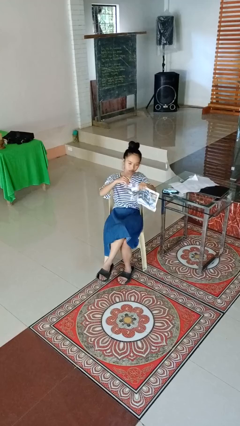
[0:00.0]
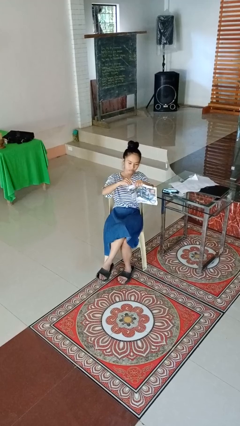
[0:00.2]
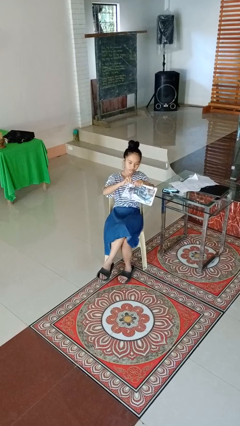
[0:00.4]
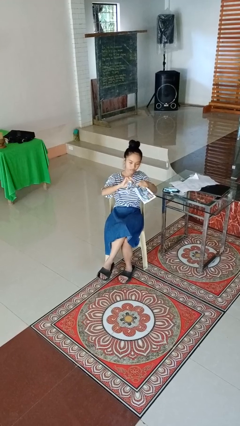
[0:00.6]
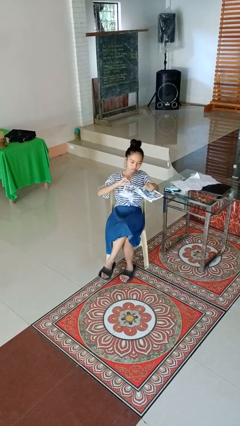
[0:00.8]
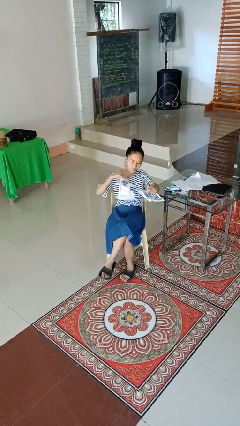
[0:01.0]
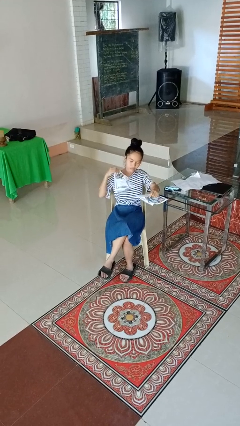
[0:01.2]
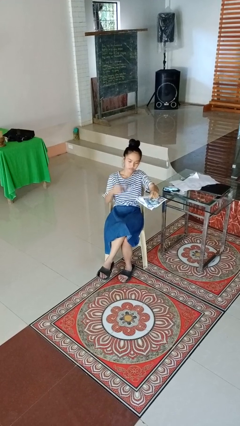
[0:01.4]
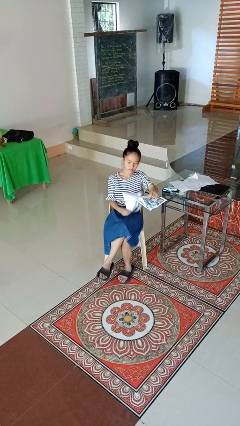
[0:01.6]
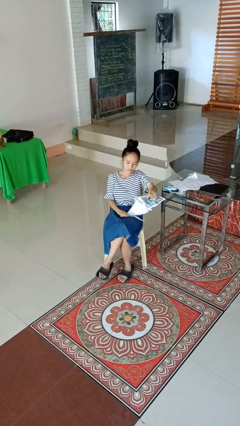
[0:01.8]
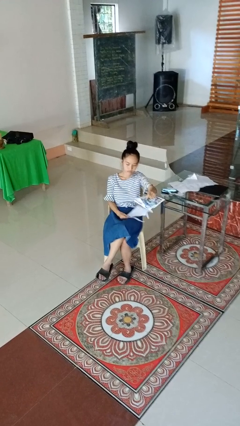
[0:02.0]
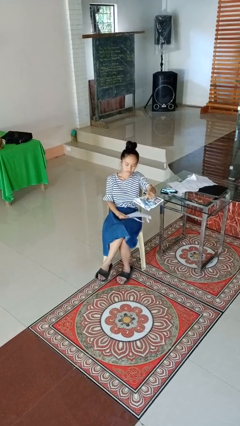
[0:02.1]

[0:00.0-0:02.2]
person tears paper

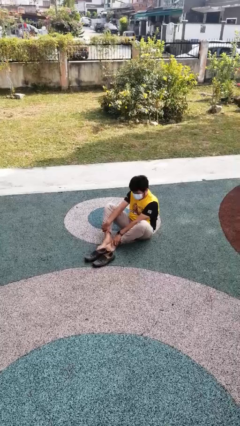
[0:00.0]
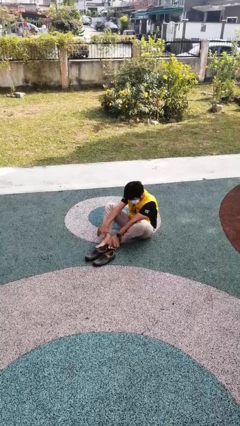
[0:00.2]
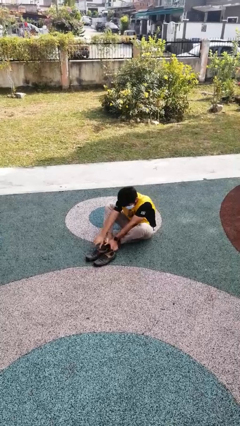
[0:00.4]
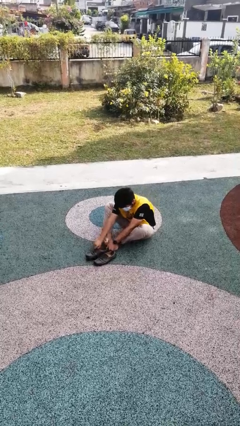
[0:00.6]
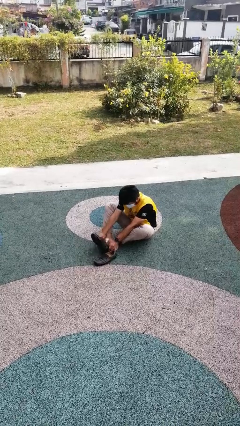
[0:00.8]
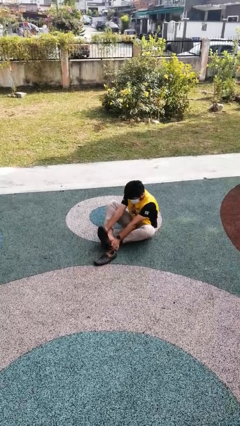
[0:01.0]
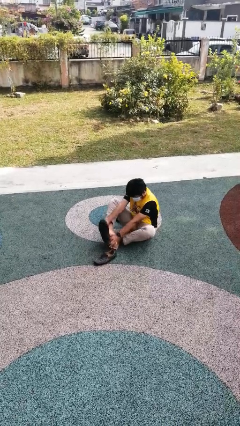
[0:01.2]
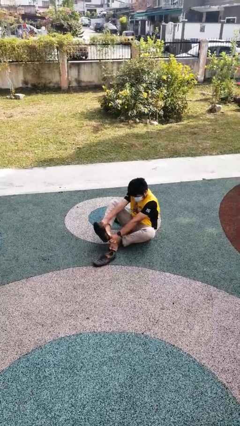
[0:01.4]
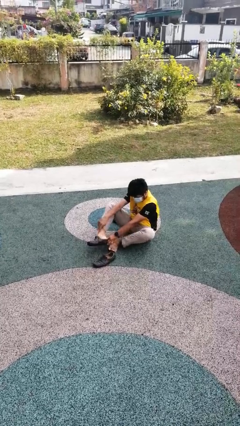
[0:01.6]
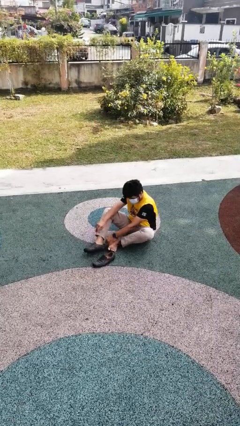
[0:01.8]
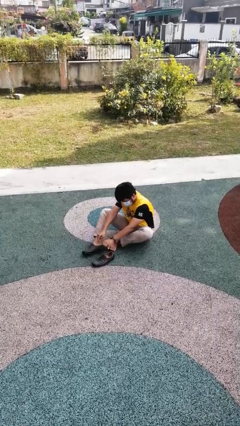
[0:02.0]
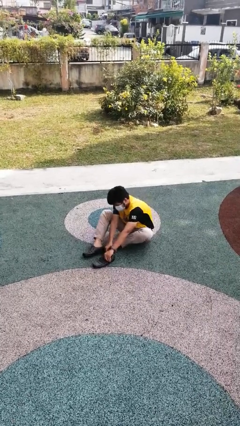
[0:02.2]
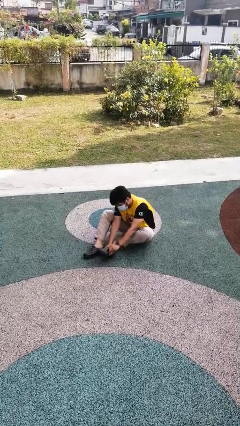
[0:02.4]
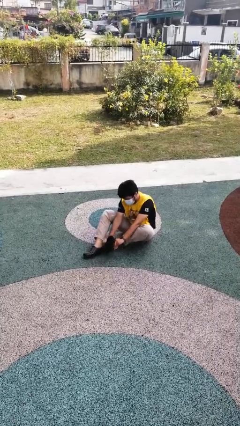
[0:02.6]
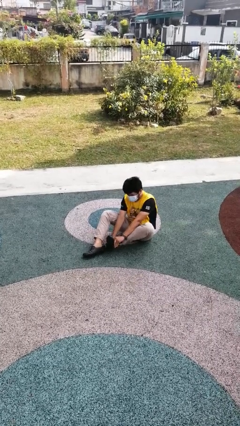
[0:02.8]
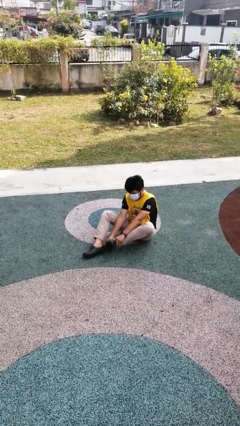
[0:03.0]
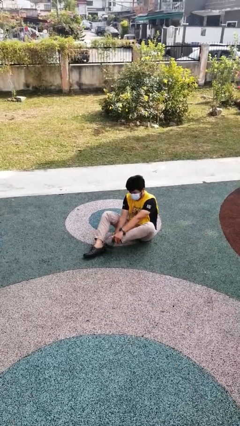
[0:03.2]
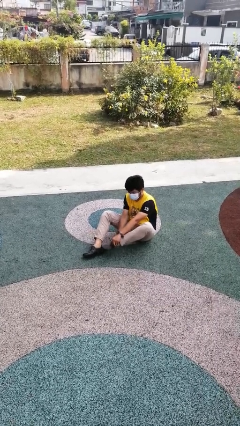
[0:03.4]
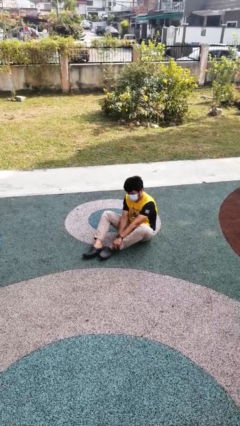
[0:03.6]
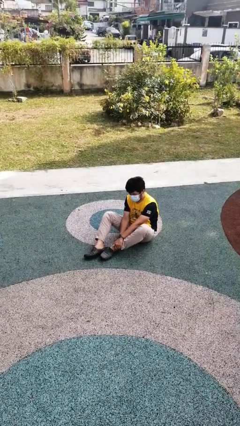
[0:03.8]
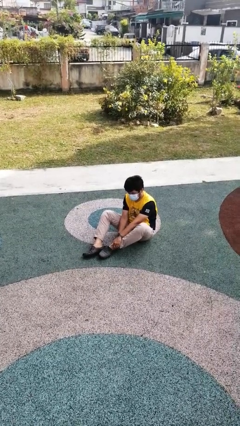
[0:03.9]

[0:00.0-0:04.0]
person puts on shoes

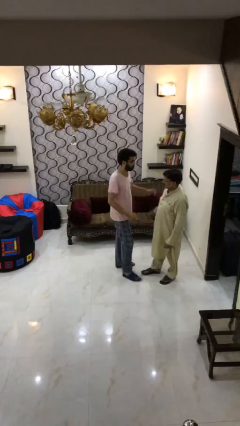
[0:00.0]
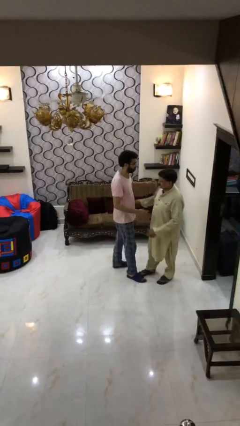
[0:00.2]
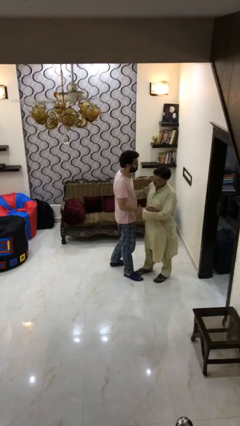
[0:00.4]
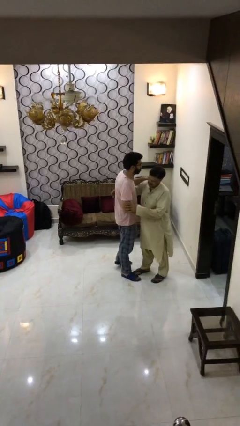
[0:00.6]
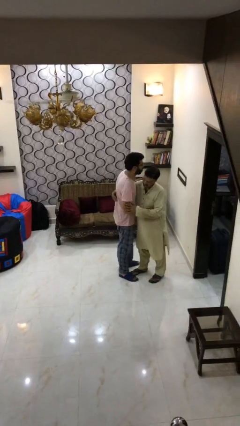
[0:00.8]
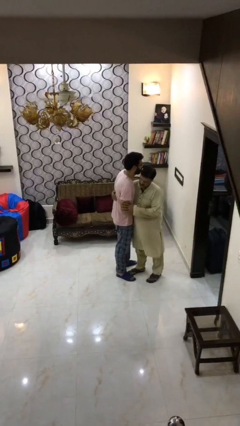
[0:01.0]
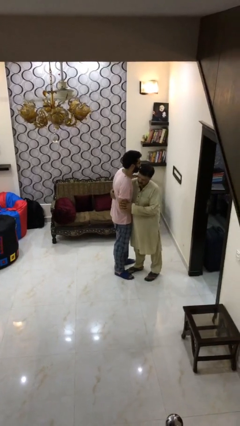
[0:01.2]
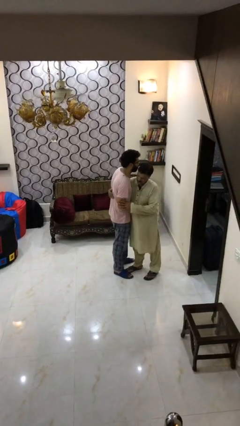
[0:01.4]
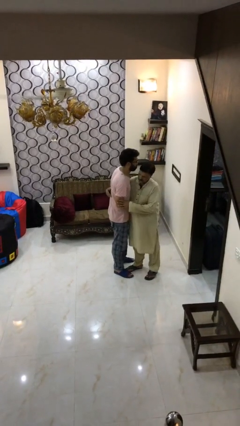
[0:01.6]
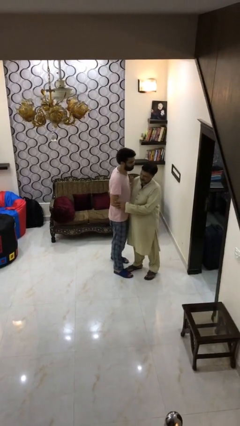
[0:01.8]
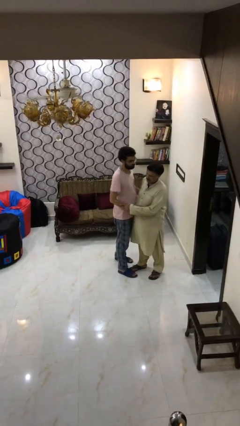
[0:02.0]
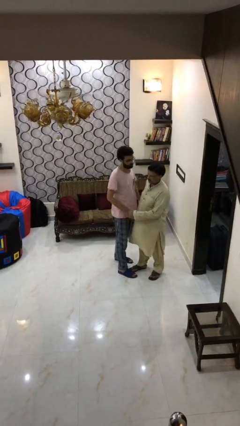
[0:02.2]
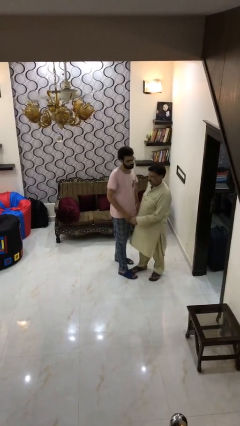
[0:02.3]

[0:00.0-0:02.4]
person embraces person

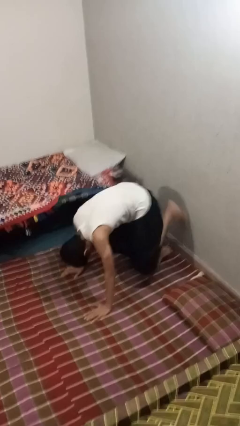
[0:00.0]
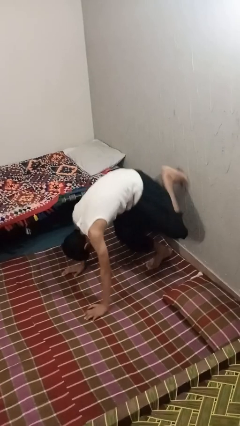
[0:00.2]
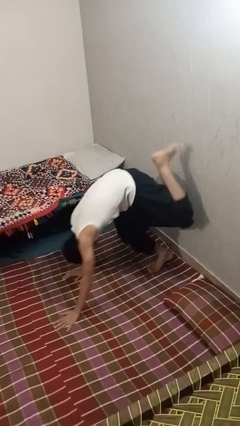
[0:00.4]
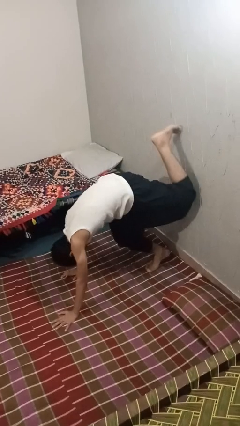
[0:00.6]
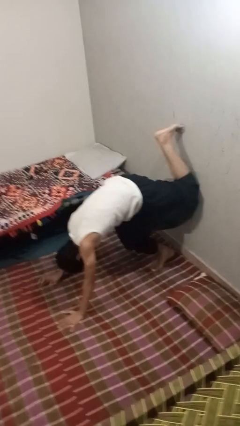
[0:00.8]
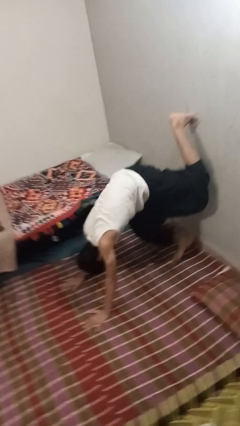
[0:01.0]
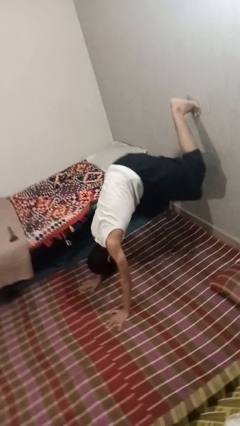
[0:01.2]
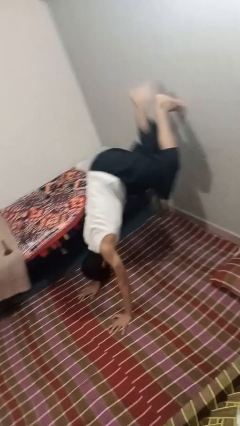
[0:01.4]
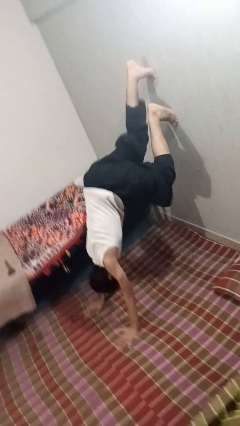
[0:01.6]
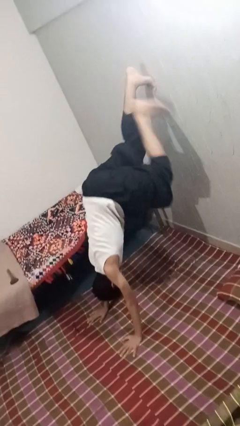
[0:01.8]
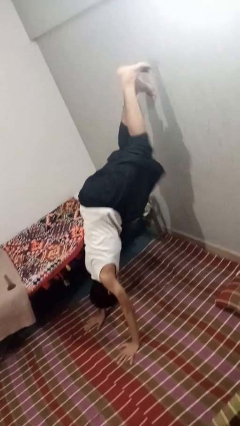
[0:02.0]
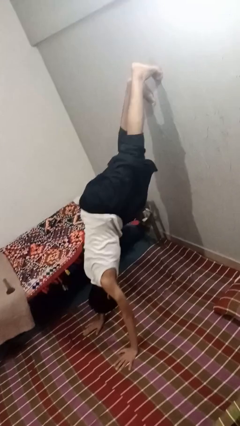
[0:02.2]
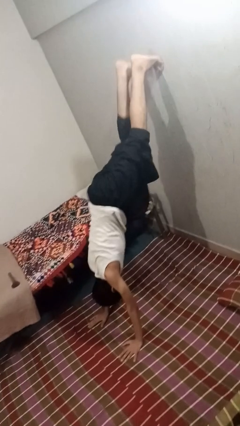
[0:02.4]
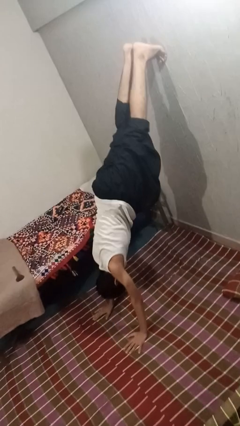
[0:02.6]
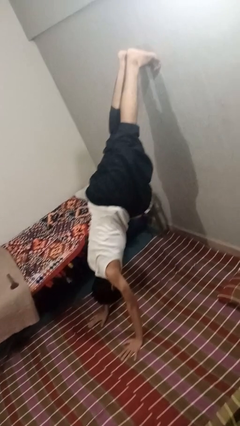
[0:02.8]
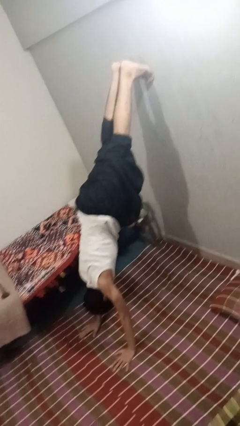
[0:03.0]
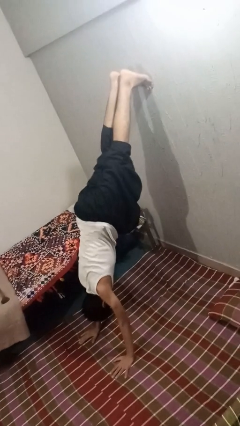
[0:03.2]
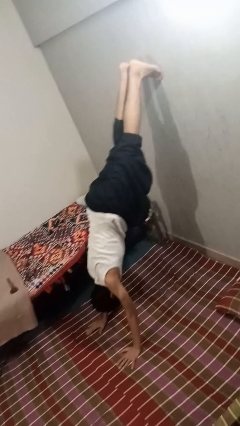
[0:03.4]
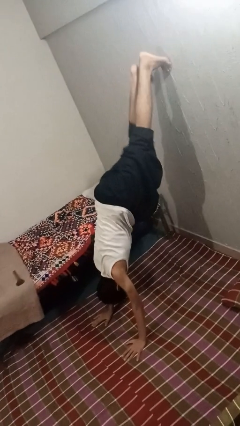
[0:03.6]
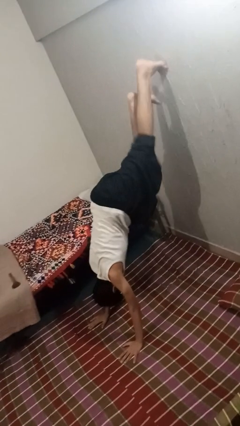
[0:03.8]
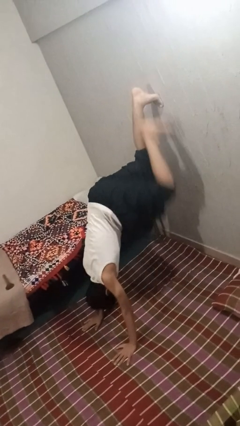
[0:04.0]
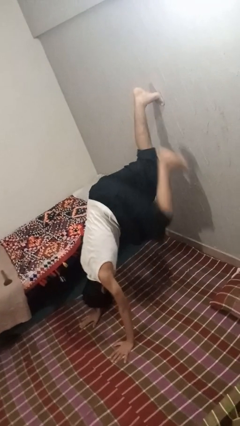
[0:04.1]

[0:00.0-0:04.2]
person handstand

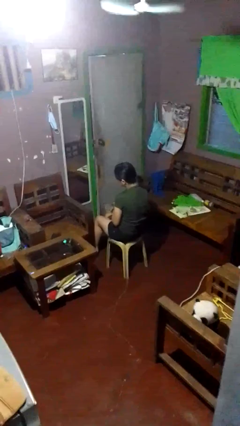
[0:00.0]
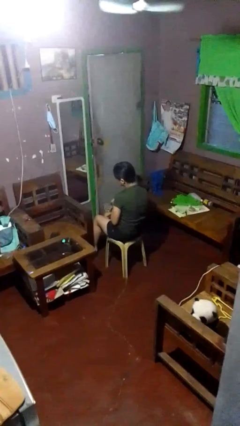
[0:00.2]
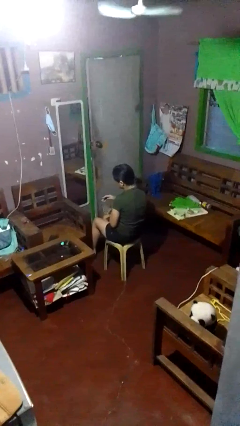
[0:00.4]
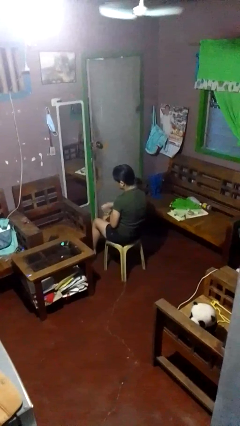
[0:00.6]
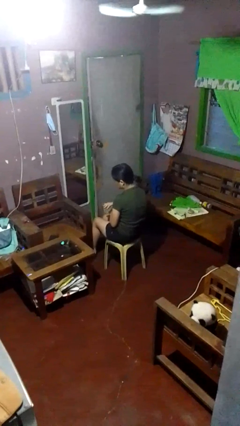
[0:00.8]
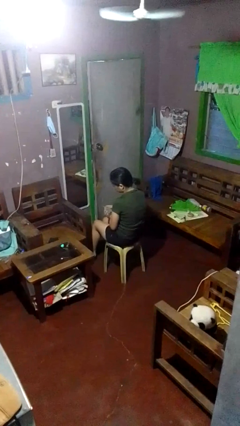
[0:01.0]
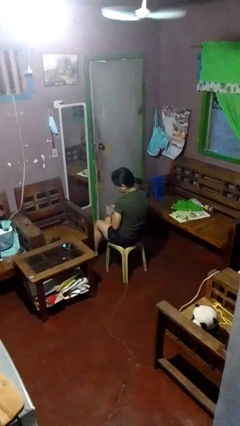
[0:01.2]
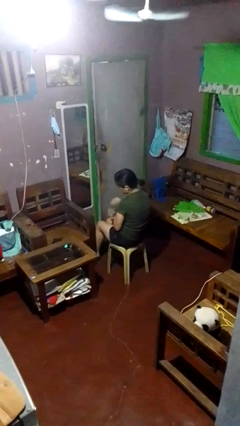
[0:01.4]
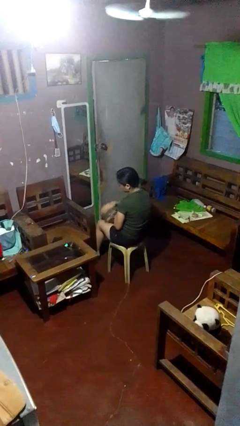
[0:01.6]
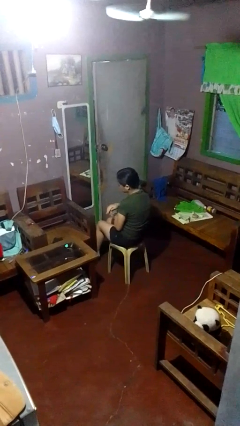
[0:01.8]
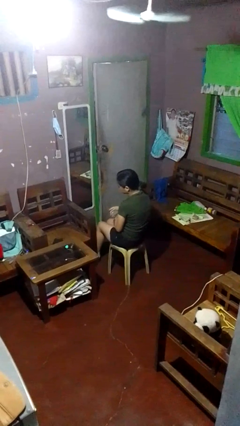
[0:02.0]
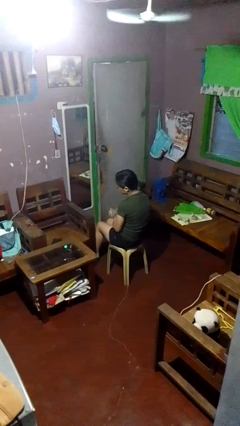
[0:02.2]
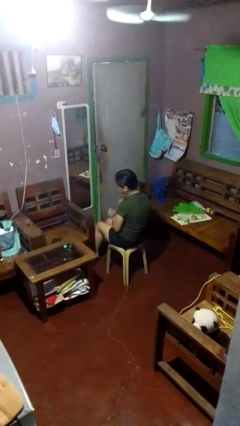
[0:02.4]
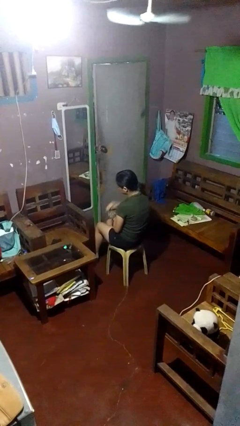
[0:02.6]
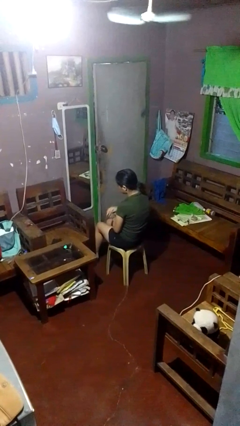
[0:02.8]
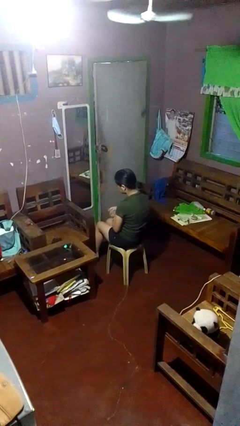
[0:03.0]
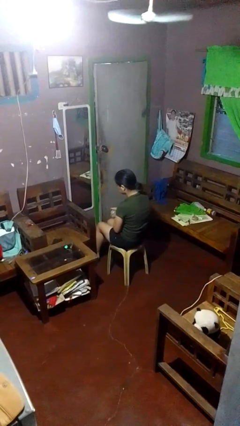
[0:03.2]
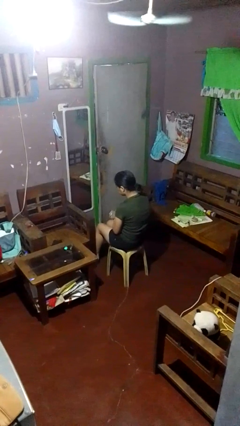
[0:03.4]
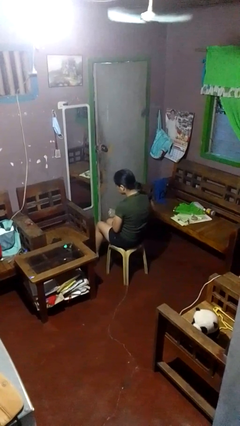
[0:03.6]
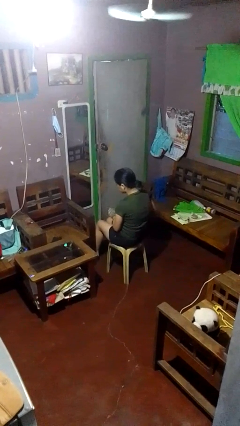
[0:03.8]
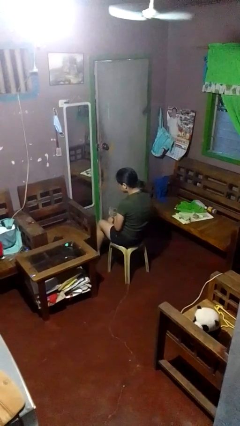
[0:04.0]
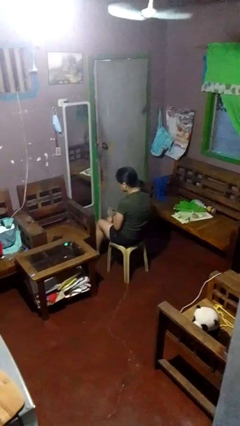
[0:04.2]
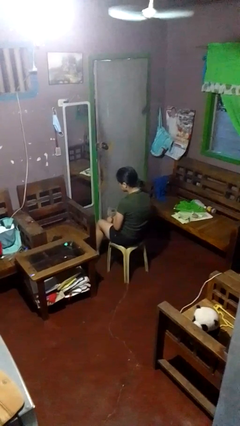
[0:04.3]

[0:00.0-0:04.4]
person pets cat
